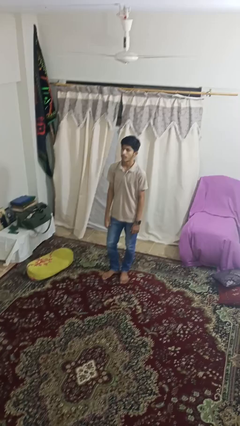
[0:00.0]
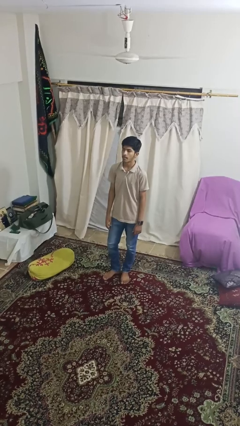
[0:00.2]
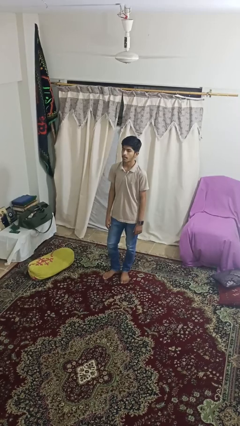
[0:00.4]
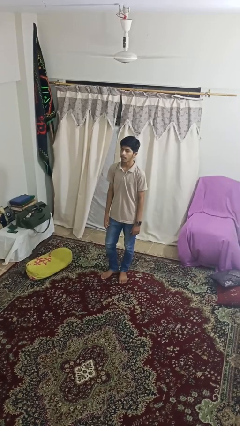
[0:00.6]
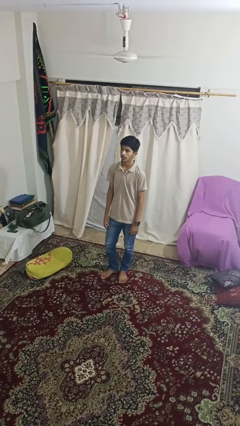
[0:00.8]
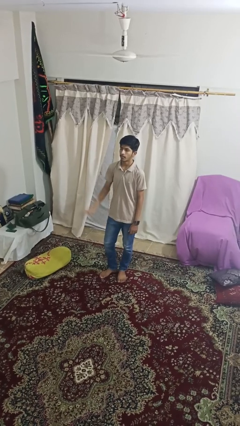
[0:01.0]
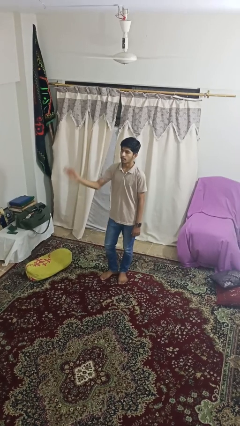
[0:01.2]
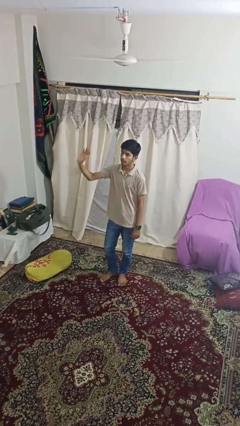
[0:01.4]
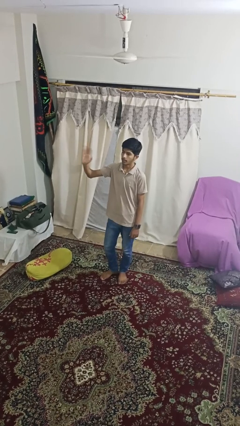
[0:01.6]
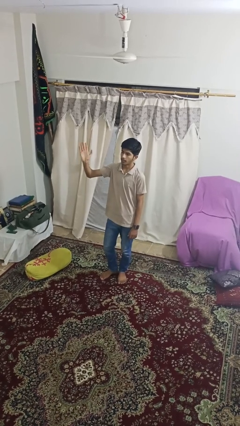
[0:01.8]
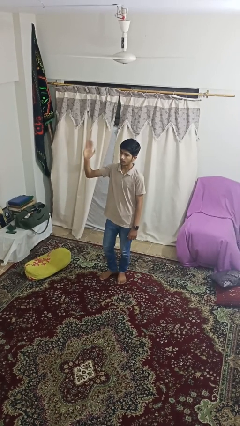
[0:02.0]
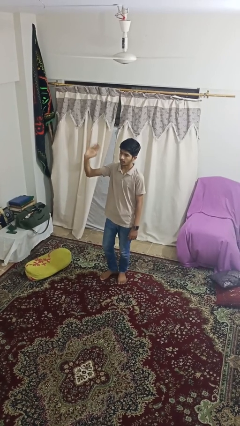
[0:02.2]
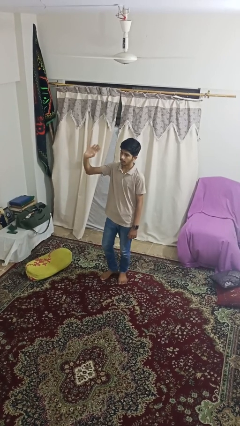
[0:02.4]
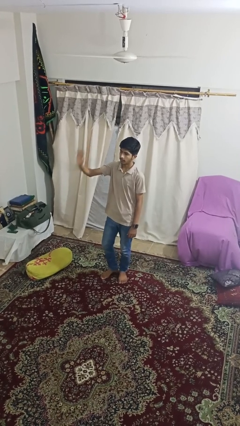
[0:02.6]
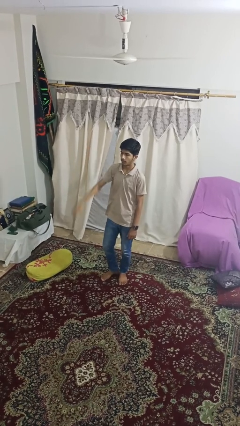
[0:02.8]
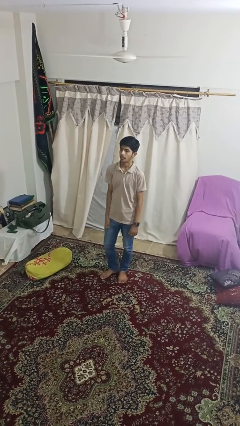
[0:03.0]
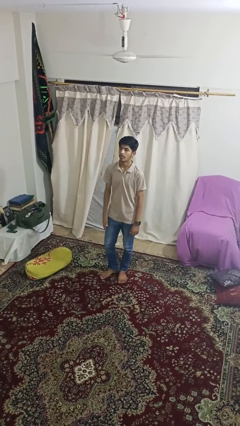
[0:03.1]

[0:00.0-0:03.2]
person waves at person

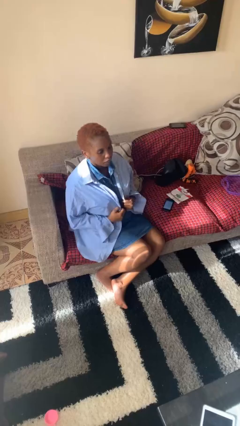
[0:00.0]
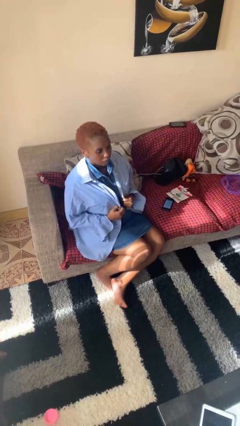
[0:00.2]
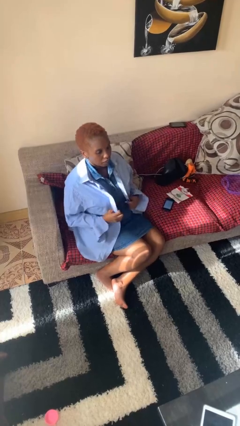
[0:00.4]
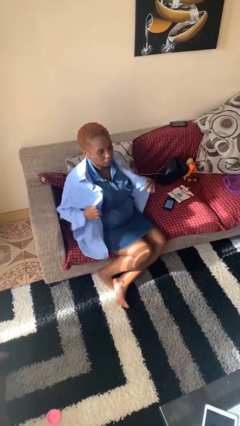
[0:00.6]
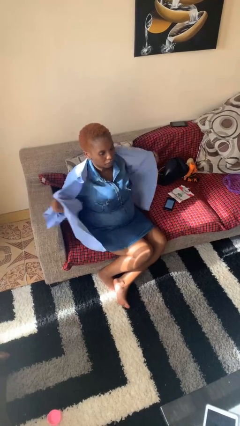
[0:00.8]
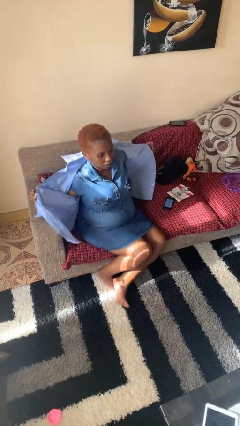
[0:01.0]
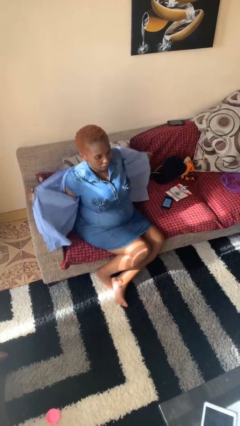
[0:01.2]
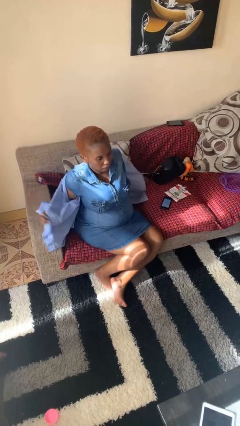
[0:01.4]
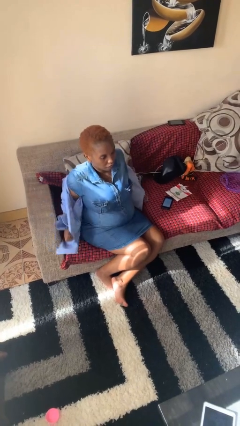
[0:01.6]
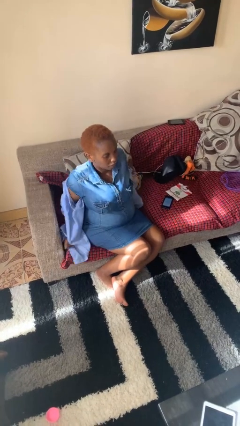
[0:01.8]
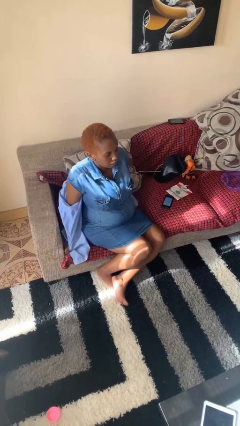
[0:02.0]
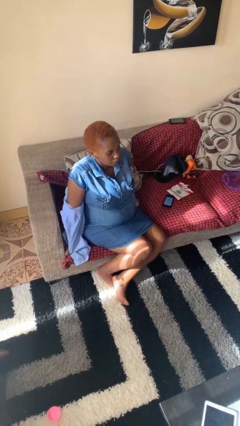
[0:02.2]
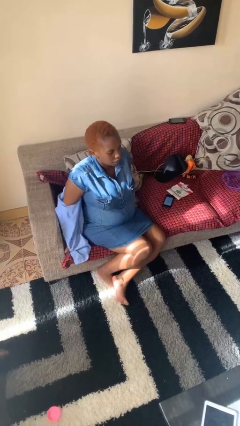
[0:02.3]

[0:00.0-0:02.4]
person takes off shirt

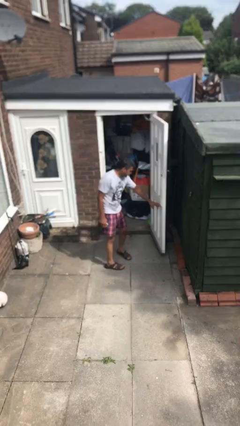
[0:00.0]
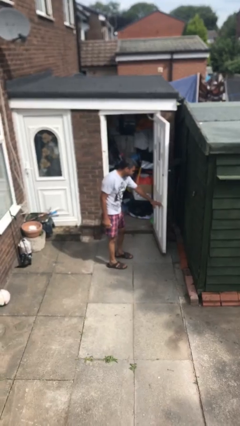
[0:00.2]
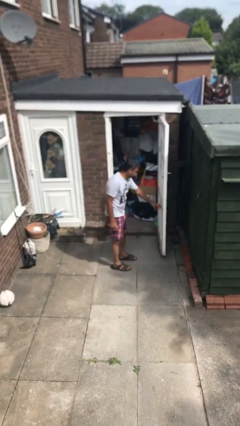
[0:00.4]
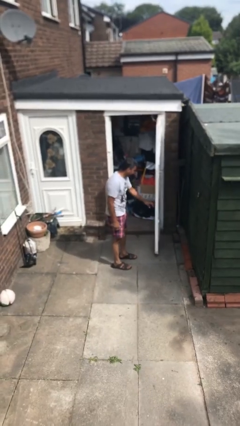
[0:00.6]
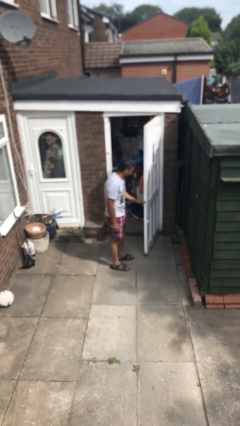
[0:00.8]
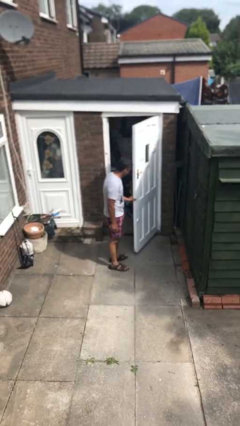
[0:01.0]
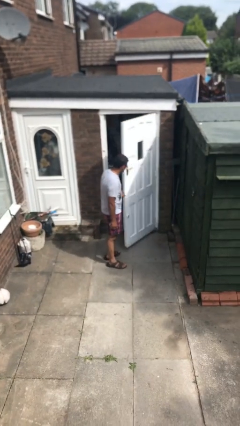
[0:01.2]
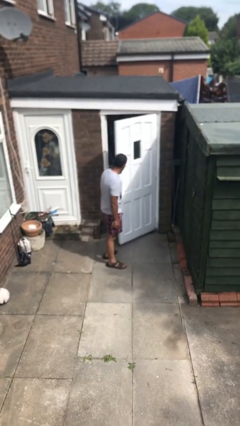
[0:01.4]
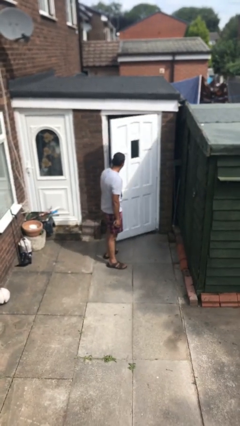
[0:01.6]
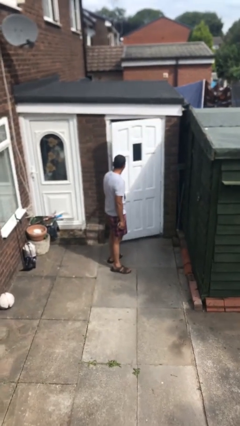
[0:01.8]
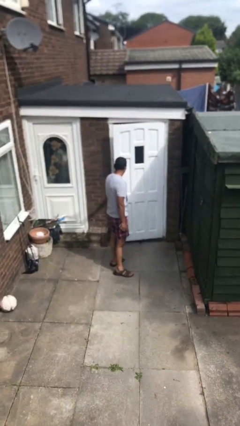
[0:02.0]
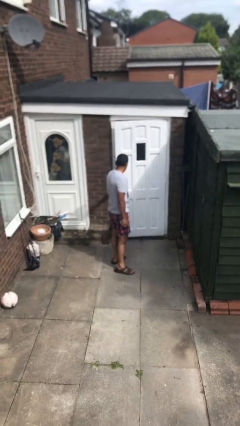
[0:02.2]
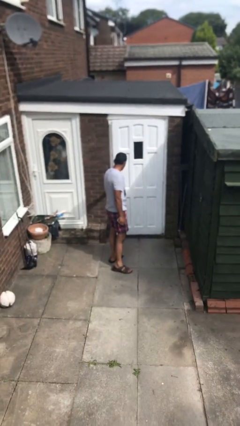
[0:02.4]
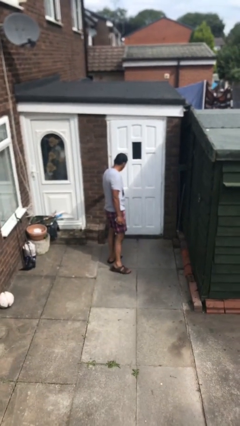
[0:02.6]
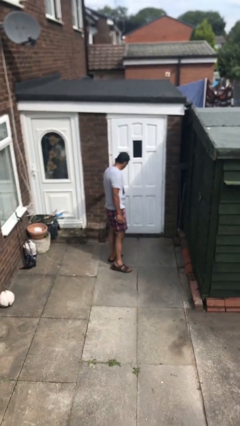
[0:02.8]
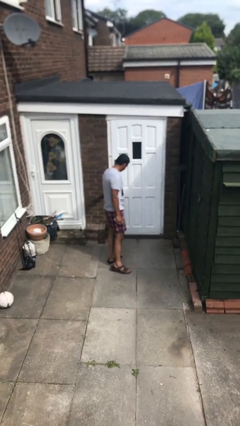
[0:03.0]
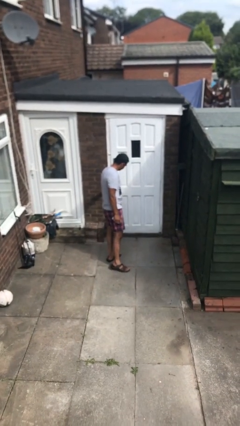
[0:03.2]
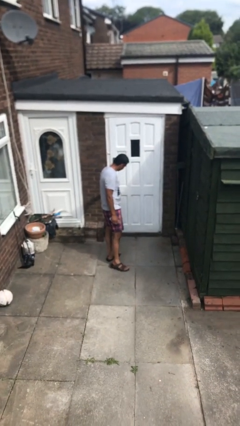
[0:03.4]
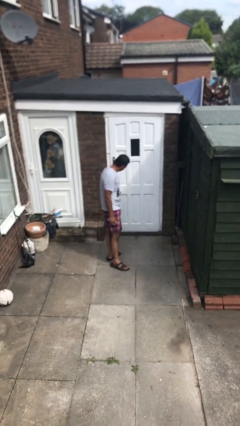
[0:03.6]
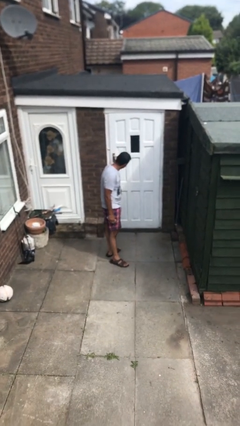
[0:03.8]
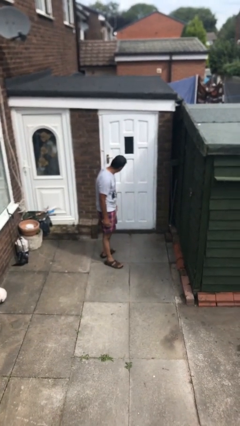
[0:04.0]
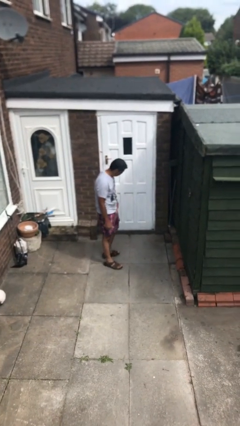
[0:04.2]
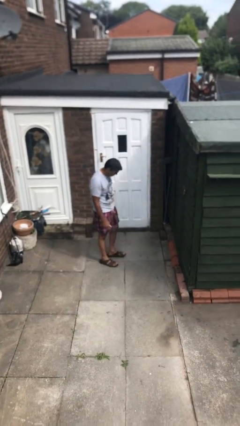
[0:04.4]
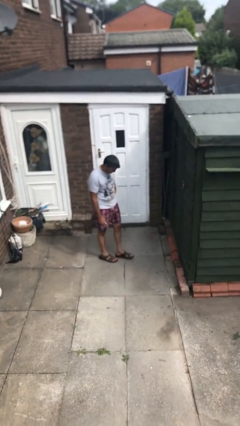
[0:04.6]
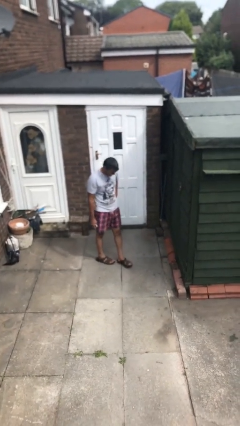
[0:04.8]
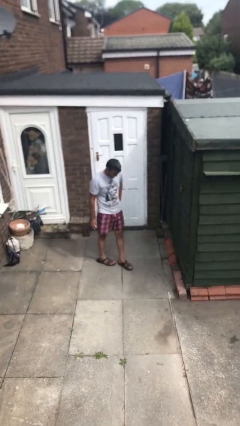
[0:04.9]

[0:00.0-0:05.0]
person closes facility door

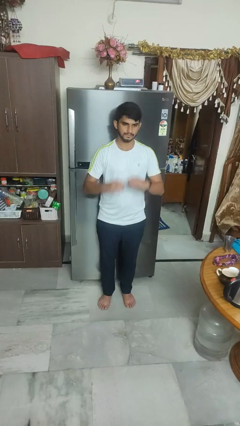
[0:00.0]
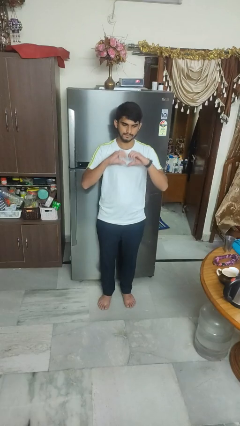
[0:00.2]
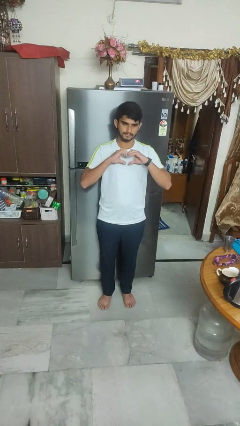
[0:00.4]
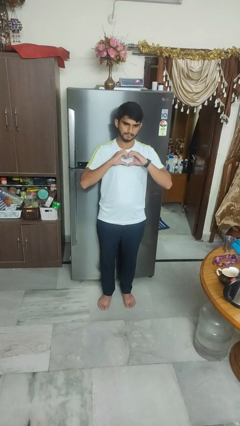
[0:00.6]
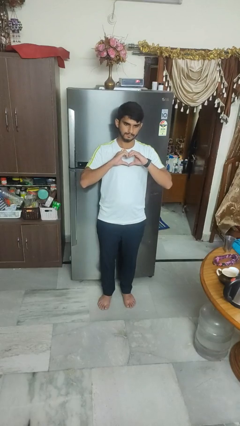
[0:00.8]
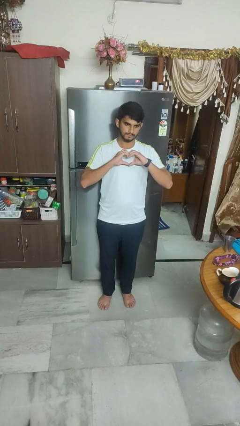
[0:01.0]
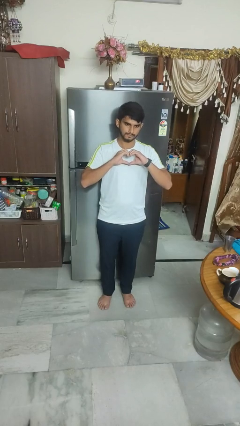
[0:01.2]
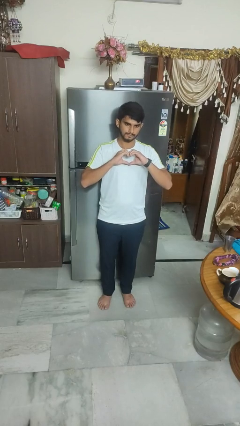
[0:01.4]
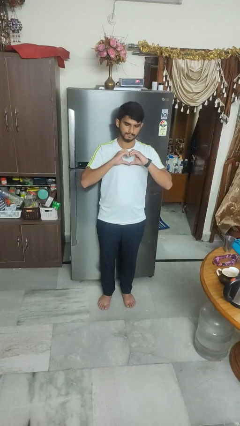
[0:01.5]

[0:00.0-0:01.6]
person gestures heart

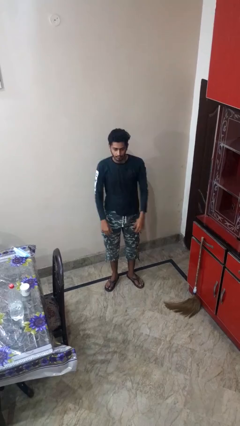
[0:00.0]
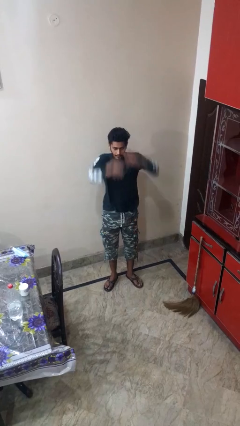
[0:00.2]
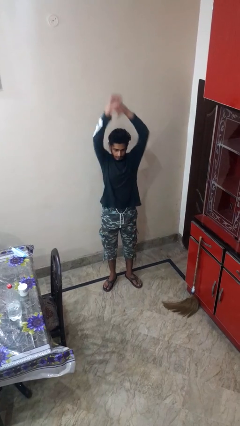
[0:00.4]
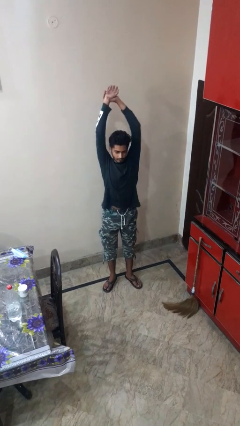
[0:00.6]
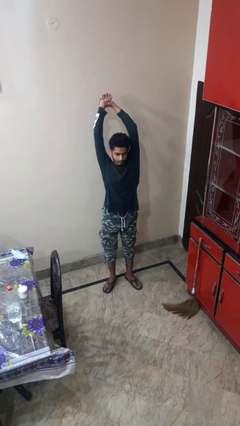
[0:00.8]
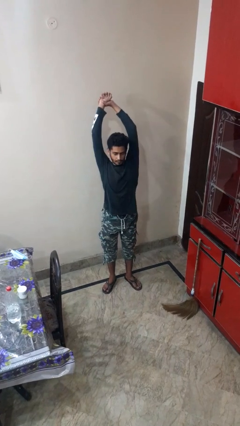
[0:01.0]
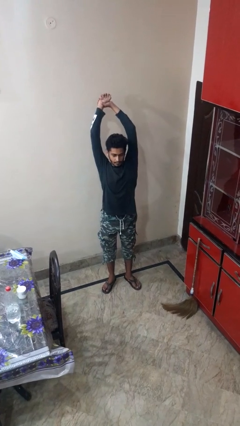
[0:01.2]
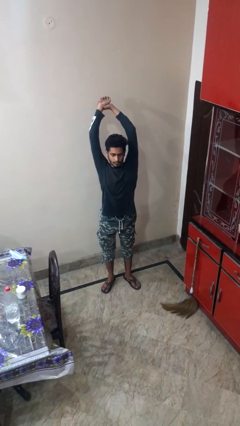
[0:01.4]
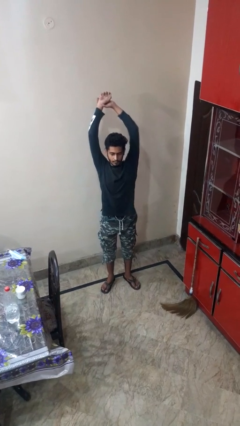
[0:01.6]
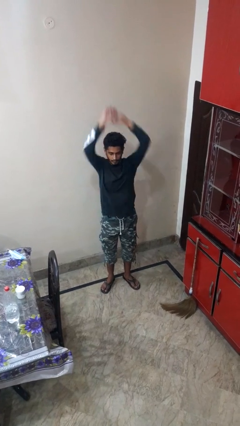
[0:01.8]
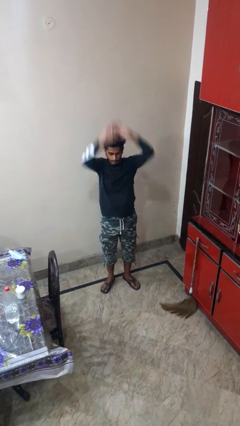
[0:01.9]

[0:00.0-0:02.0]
person stretches arms over head

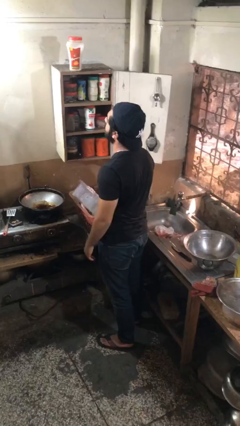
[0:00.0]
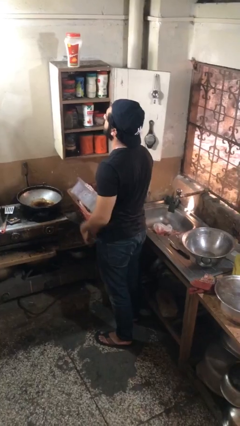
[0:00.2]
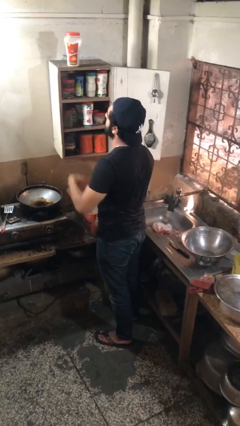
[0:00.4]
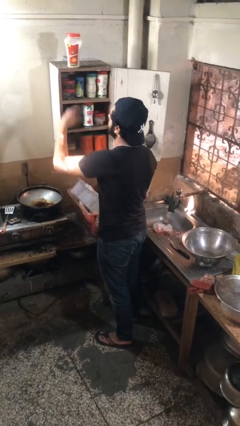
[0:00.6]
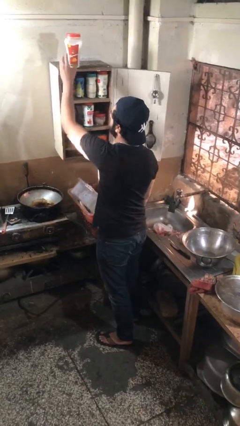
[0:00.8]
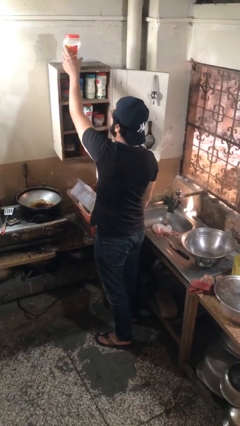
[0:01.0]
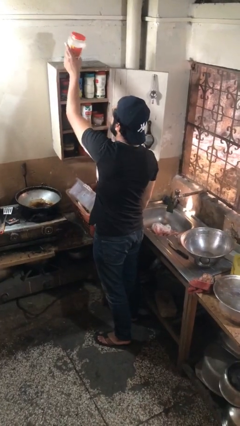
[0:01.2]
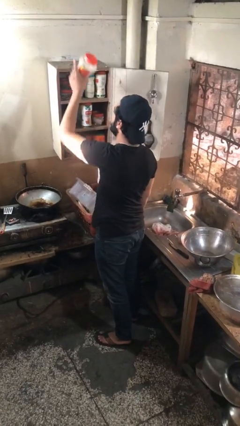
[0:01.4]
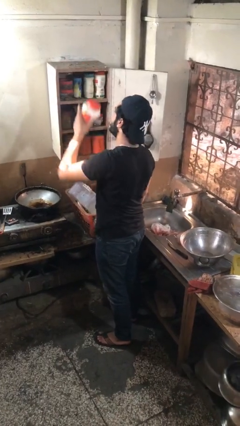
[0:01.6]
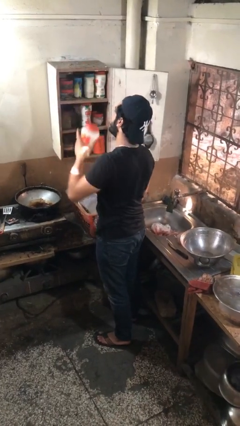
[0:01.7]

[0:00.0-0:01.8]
person takes object from cabinet

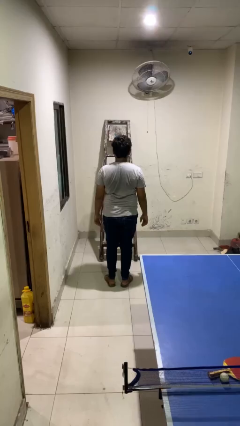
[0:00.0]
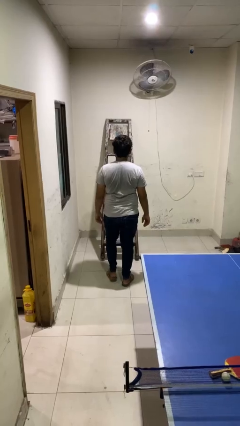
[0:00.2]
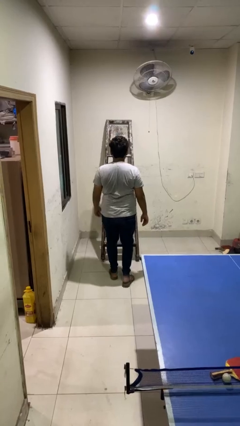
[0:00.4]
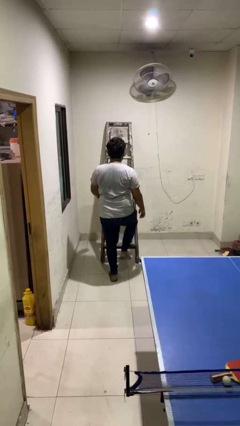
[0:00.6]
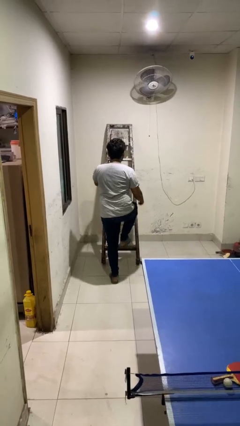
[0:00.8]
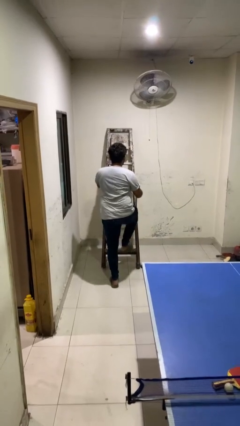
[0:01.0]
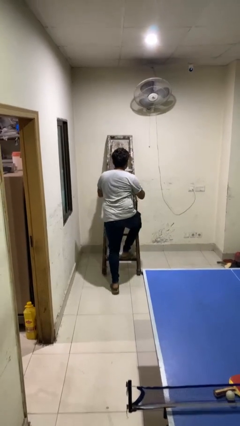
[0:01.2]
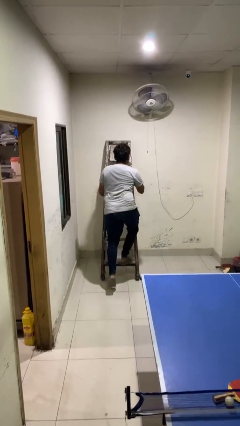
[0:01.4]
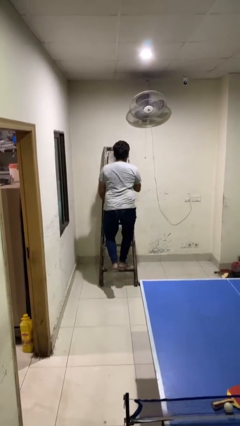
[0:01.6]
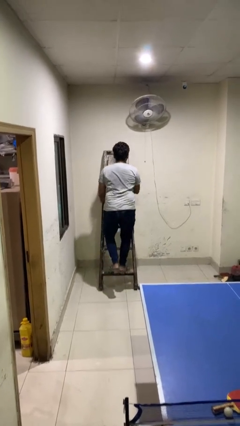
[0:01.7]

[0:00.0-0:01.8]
person climbs up ladder
